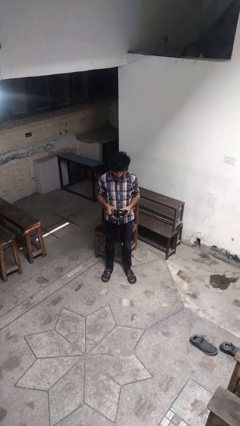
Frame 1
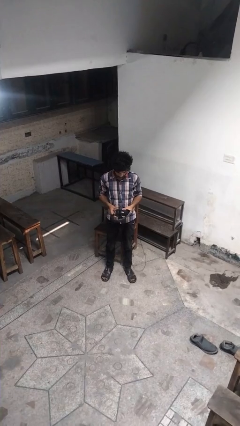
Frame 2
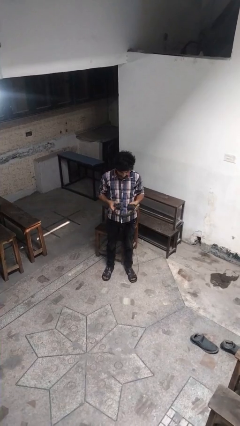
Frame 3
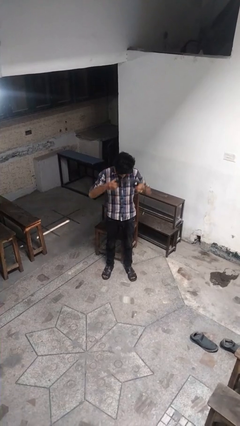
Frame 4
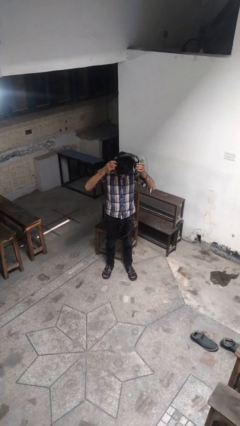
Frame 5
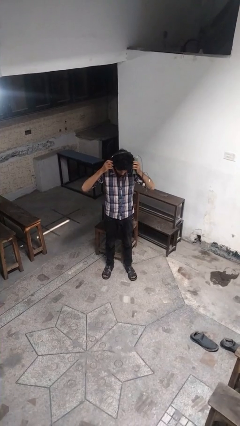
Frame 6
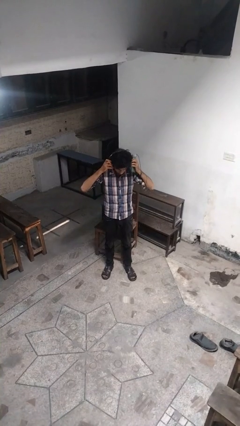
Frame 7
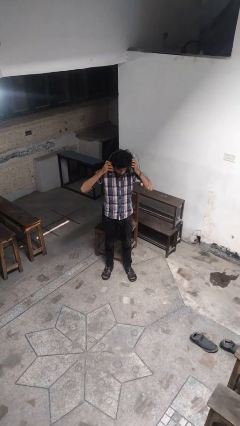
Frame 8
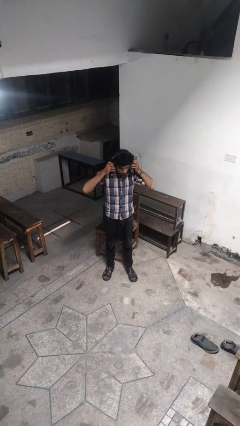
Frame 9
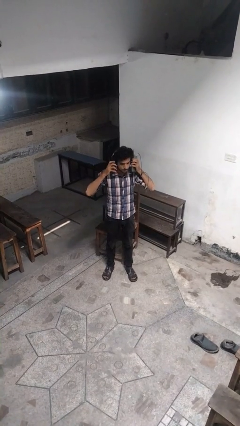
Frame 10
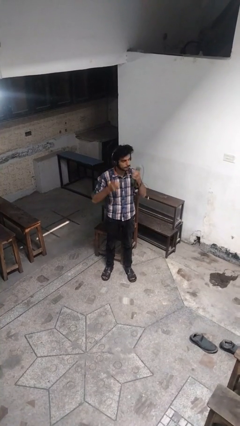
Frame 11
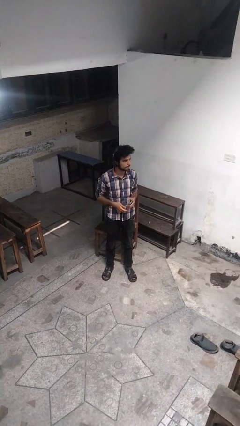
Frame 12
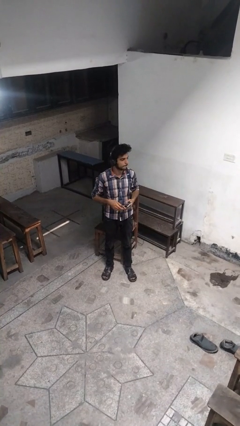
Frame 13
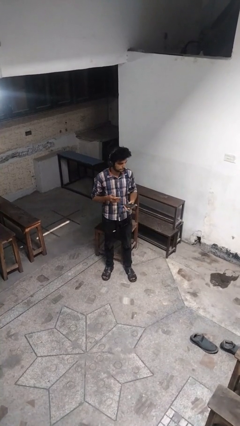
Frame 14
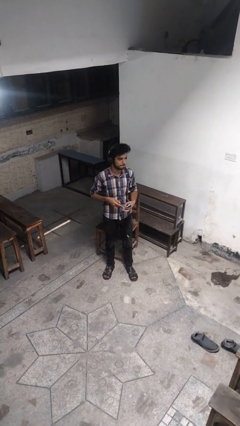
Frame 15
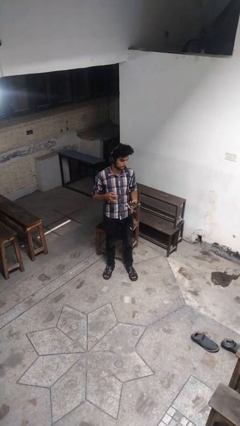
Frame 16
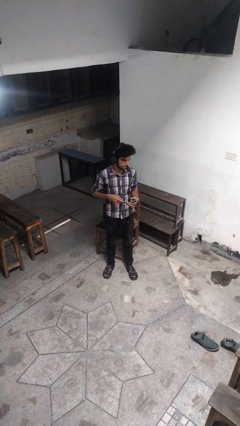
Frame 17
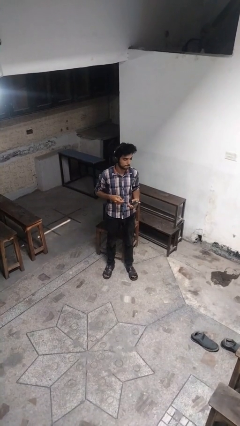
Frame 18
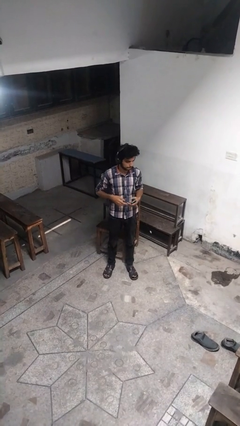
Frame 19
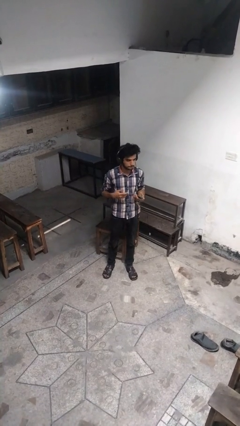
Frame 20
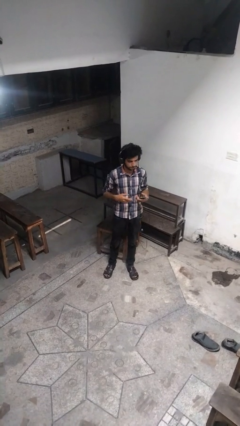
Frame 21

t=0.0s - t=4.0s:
person puts on headphones

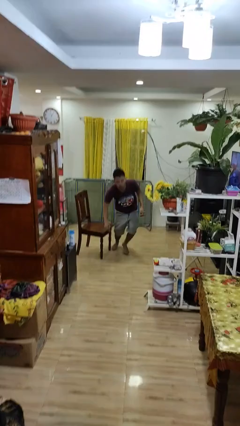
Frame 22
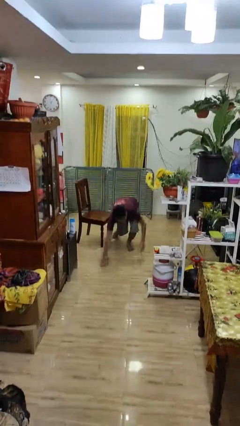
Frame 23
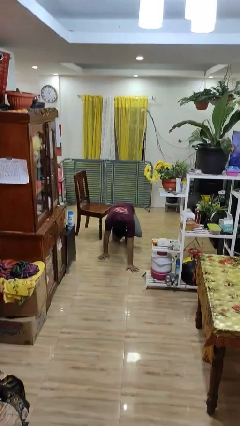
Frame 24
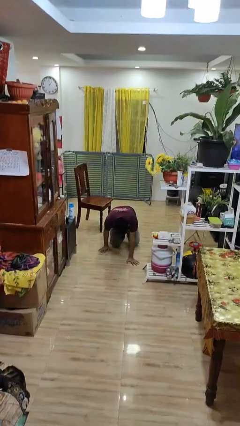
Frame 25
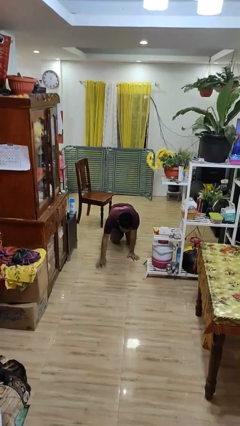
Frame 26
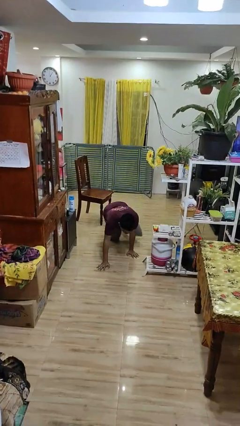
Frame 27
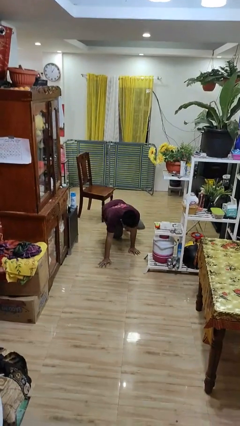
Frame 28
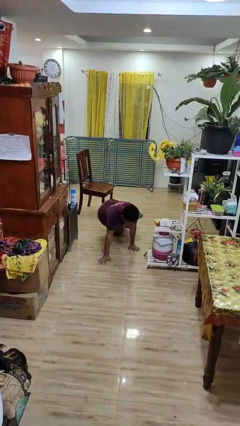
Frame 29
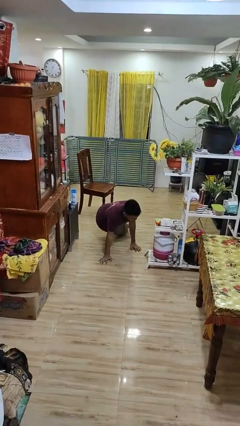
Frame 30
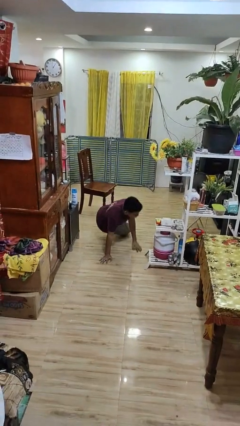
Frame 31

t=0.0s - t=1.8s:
person trips on object on floor

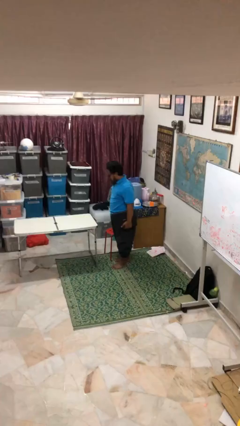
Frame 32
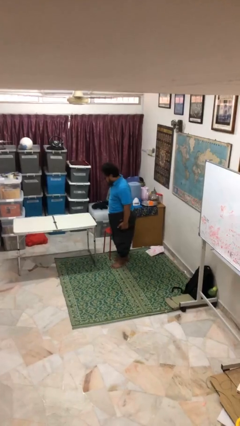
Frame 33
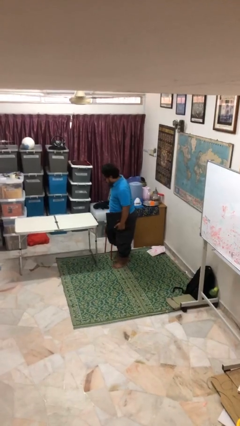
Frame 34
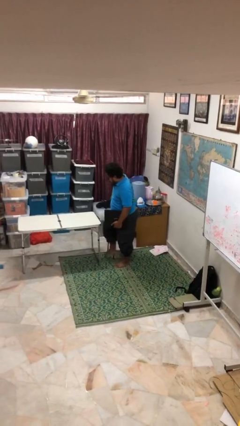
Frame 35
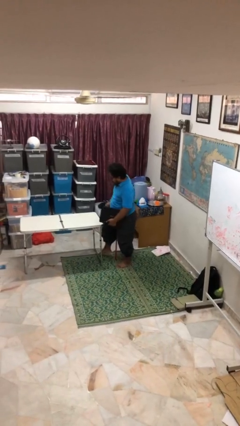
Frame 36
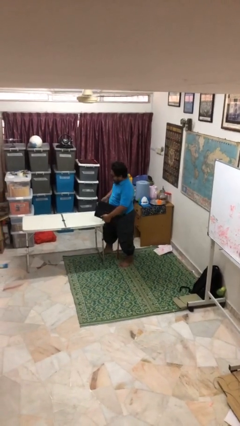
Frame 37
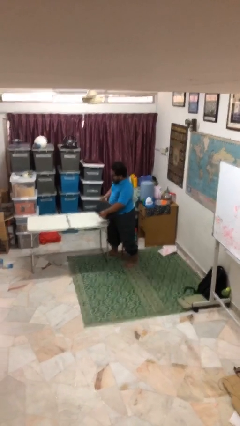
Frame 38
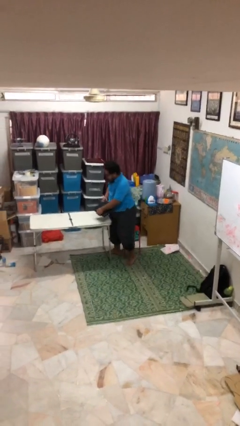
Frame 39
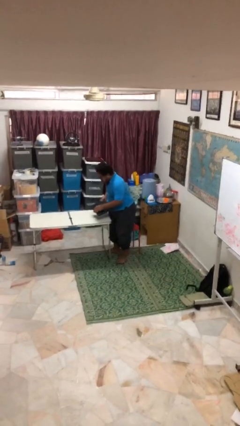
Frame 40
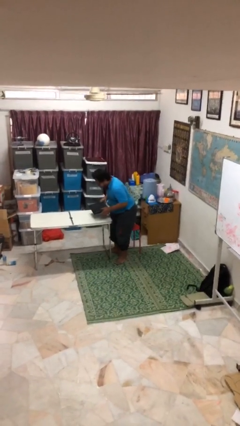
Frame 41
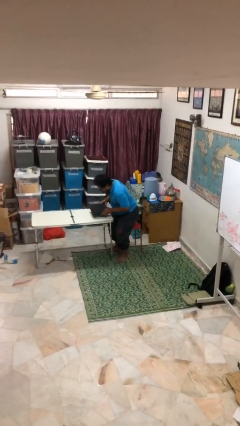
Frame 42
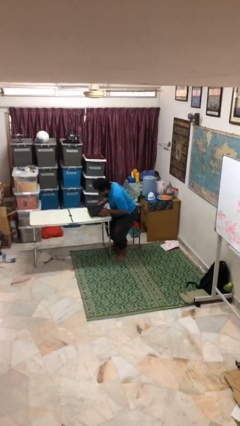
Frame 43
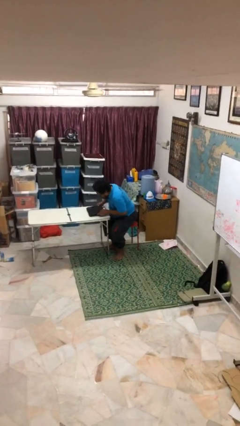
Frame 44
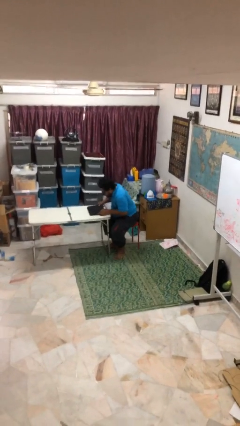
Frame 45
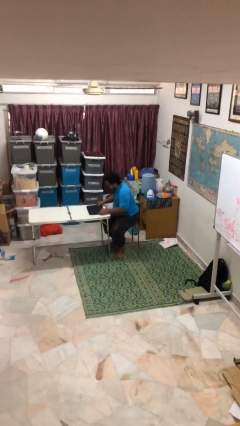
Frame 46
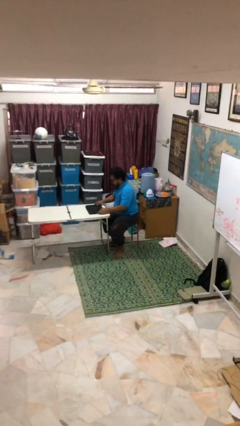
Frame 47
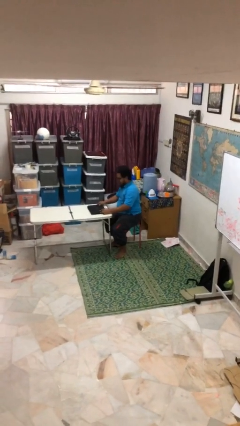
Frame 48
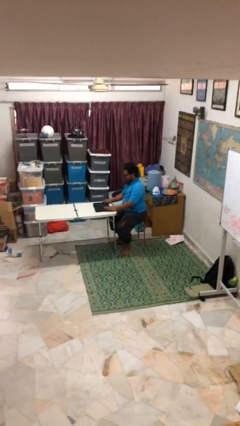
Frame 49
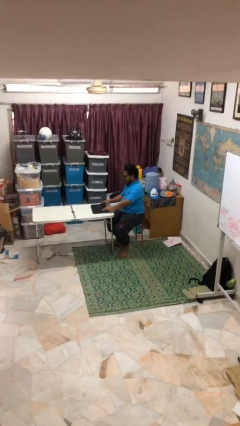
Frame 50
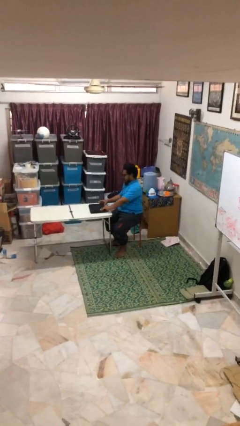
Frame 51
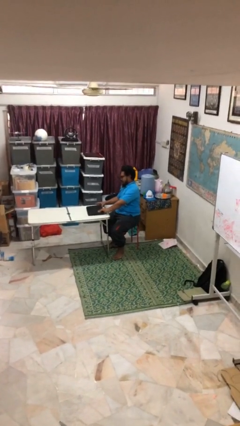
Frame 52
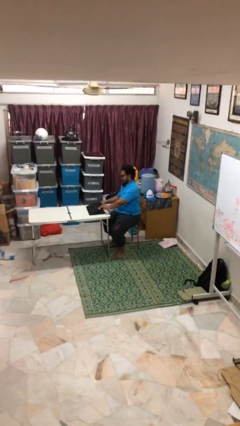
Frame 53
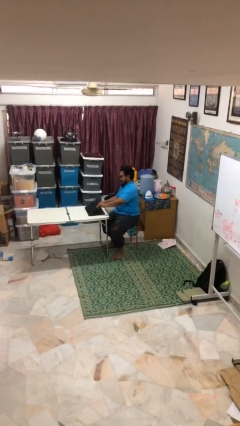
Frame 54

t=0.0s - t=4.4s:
person sits down

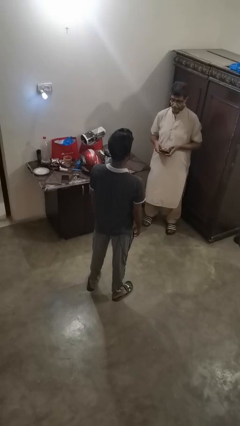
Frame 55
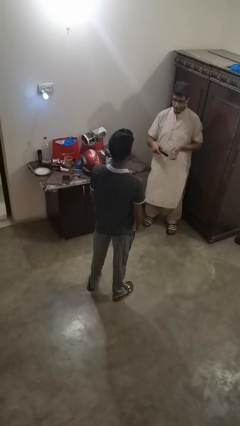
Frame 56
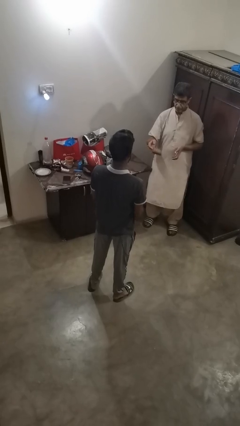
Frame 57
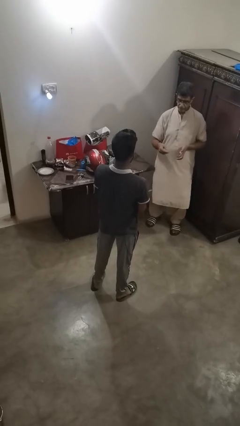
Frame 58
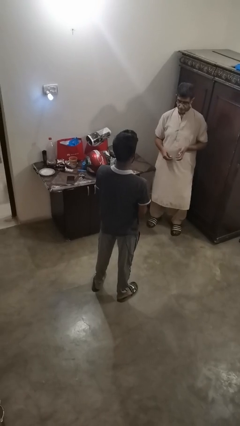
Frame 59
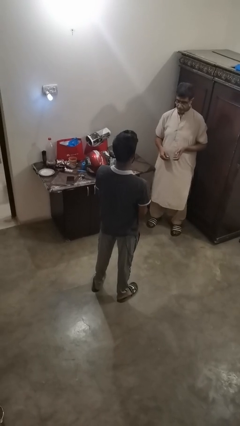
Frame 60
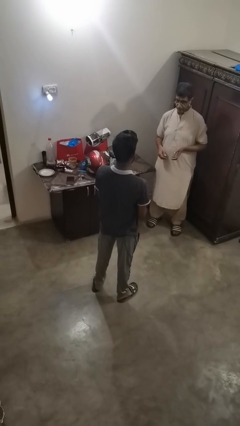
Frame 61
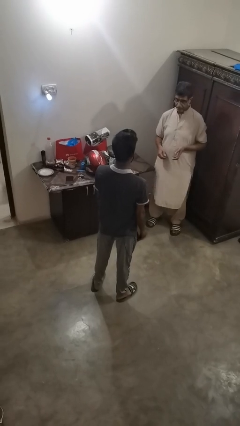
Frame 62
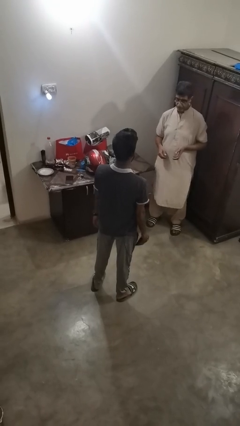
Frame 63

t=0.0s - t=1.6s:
person catches object from person

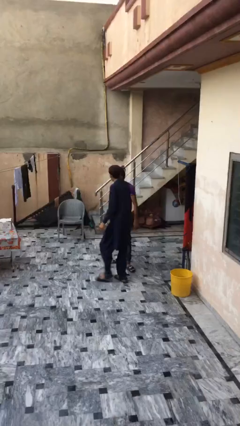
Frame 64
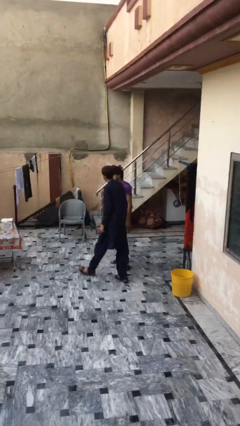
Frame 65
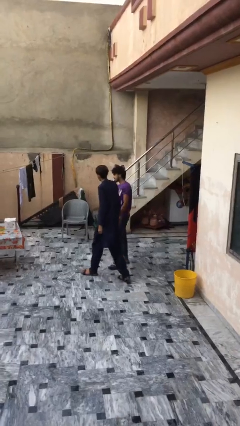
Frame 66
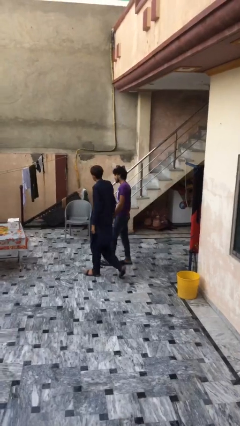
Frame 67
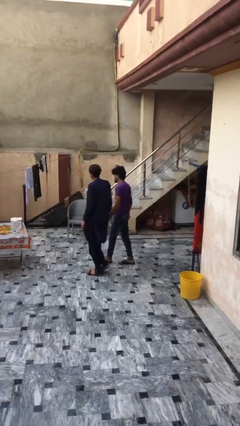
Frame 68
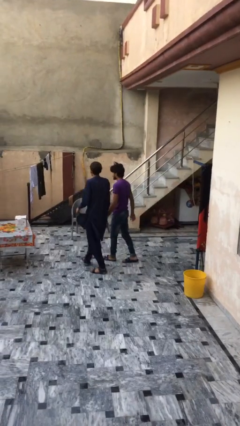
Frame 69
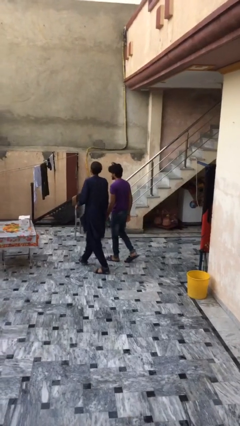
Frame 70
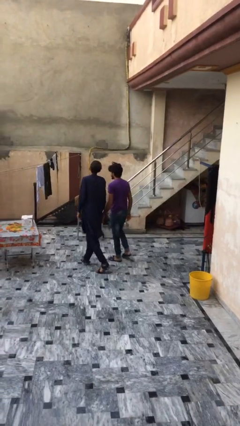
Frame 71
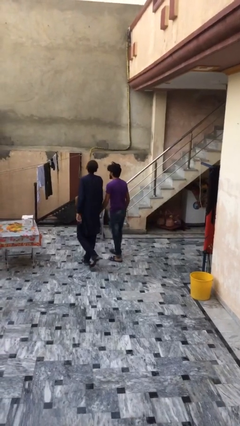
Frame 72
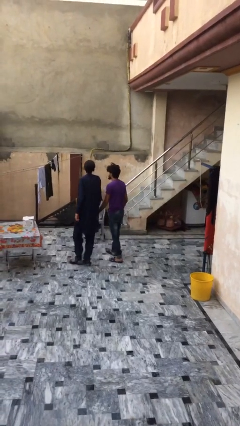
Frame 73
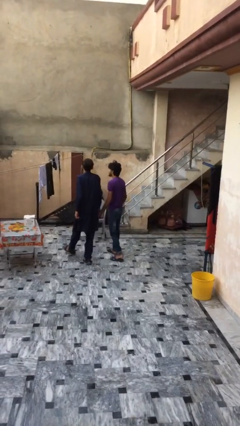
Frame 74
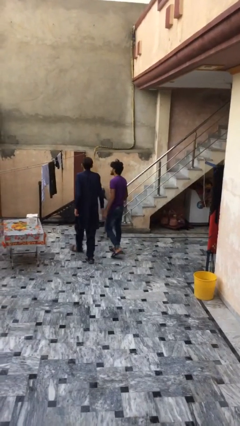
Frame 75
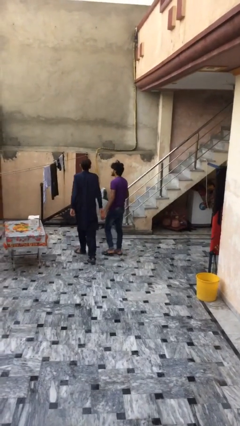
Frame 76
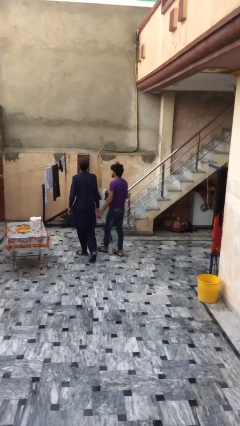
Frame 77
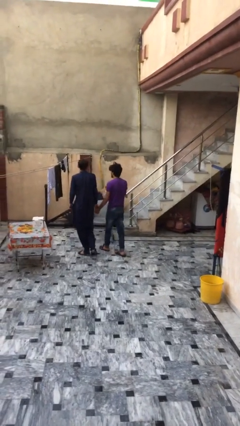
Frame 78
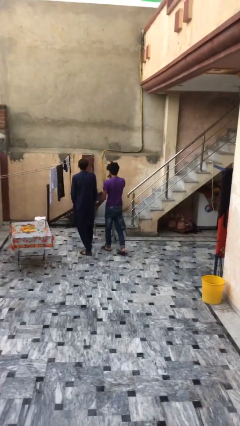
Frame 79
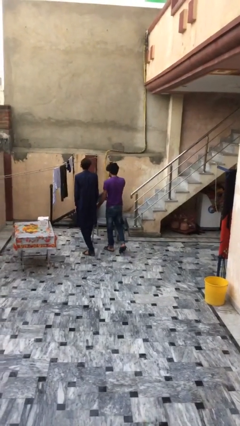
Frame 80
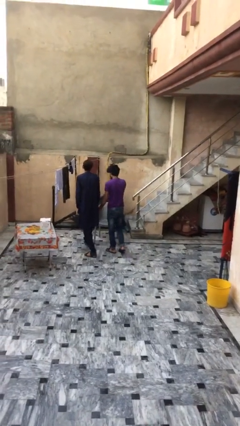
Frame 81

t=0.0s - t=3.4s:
person talks to person

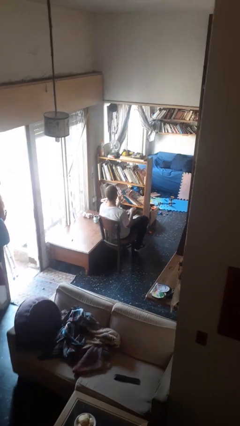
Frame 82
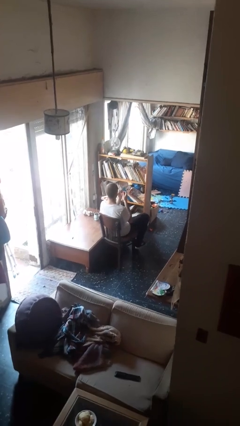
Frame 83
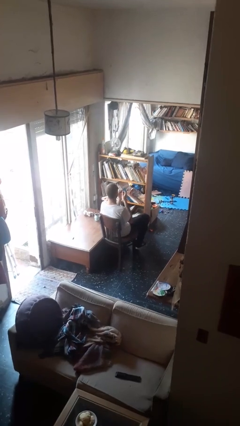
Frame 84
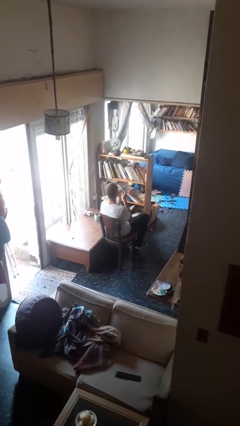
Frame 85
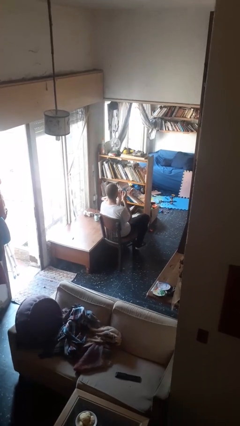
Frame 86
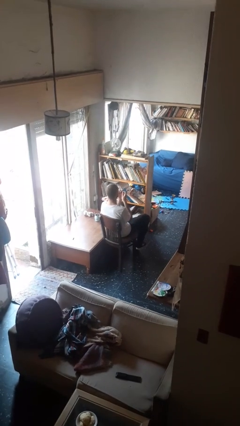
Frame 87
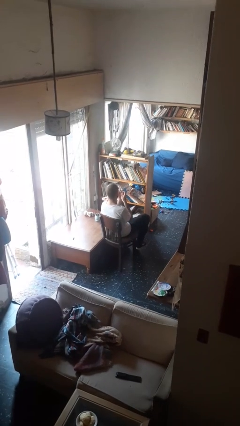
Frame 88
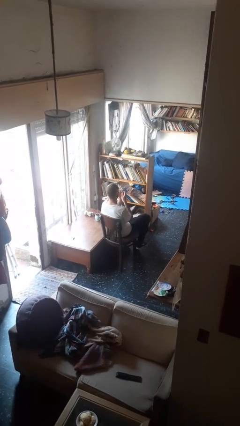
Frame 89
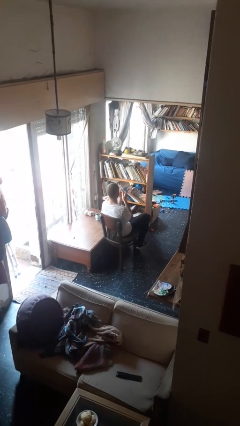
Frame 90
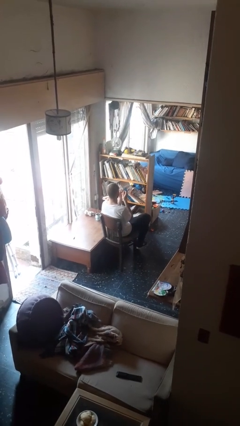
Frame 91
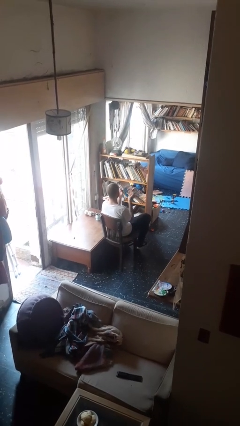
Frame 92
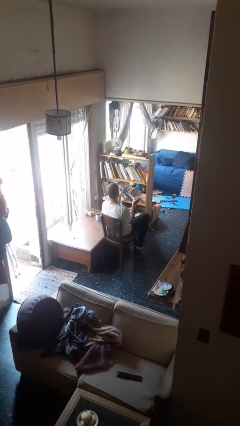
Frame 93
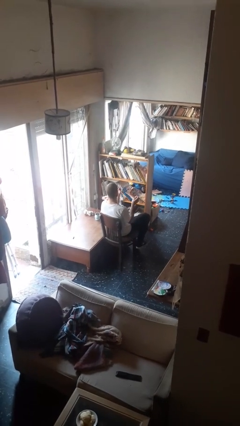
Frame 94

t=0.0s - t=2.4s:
person files fingernails
